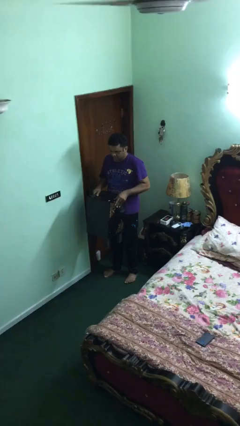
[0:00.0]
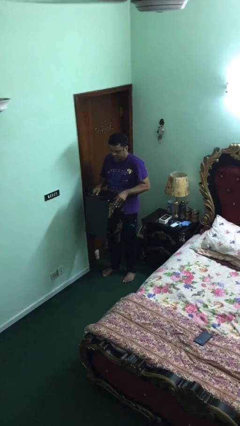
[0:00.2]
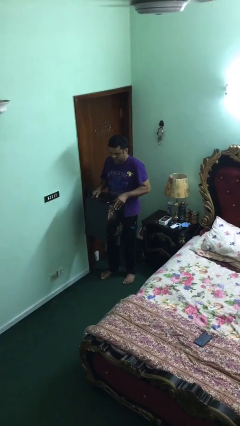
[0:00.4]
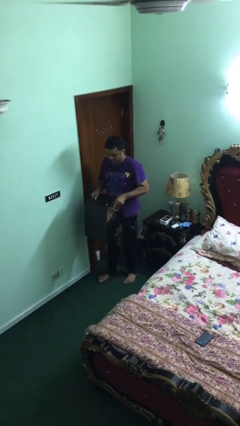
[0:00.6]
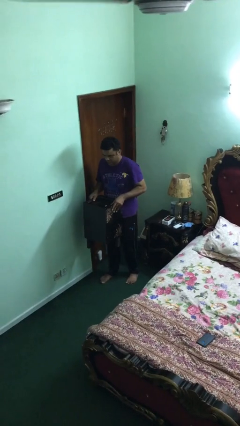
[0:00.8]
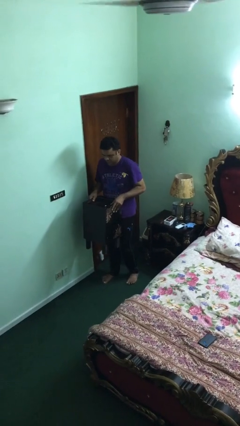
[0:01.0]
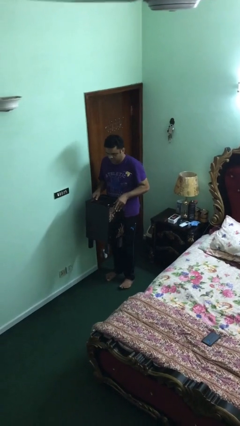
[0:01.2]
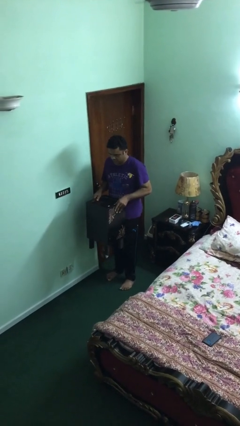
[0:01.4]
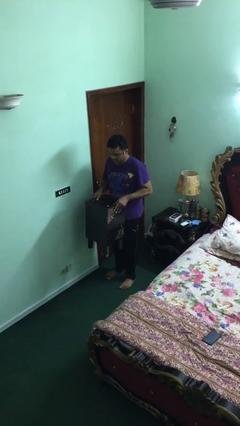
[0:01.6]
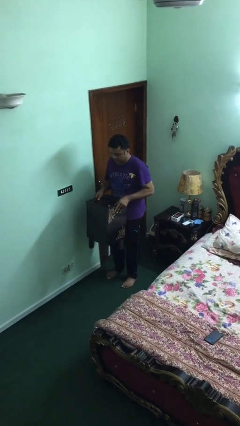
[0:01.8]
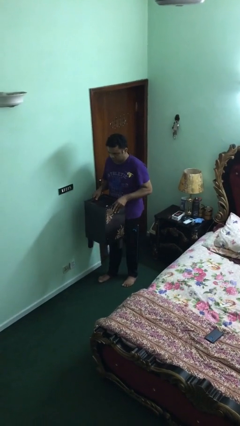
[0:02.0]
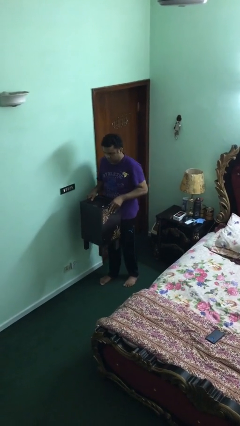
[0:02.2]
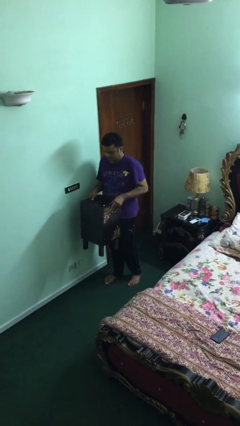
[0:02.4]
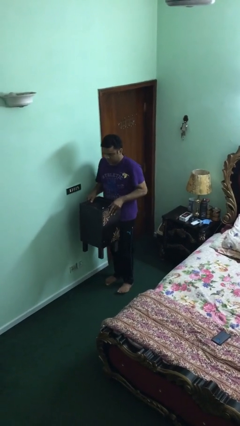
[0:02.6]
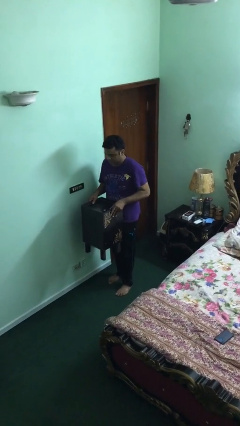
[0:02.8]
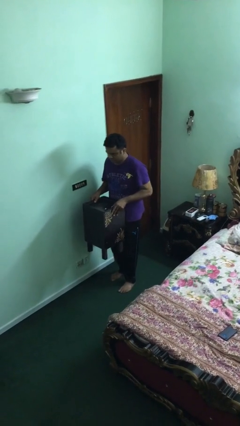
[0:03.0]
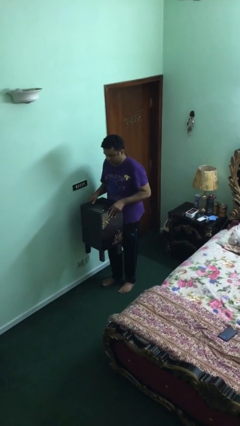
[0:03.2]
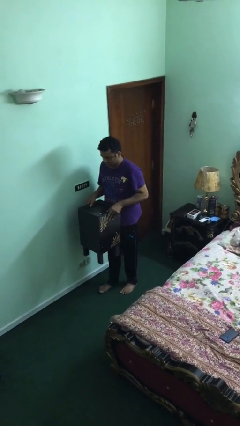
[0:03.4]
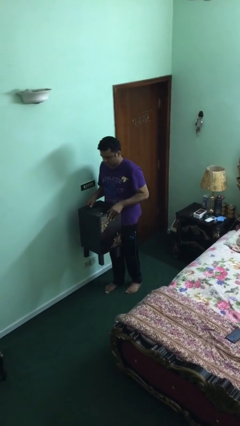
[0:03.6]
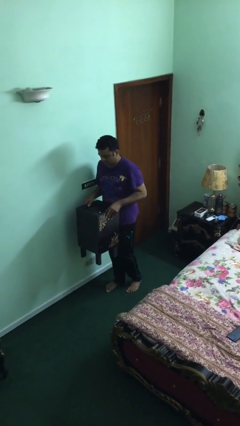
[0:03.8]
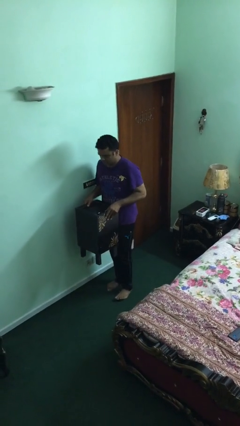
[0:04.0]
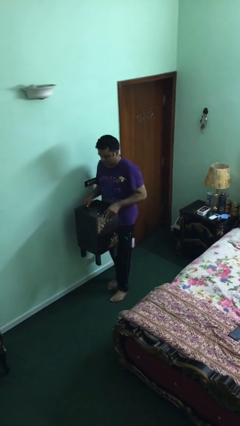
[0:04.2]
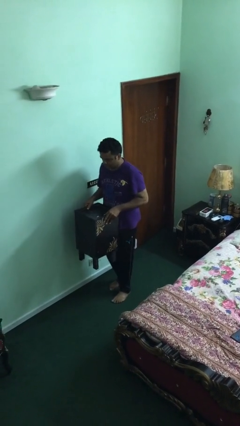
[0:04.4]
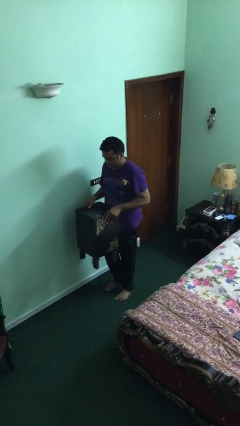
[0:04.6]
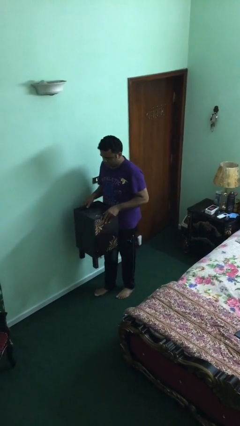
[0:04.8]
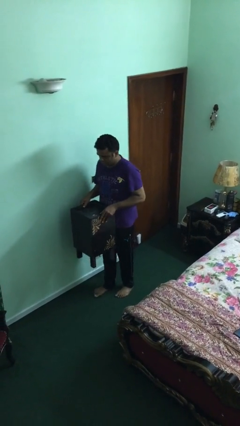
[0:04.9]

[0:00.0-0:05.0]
person carries heavy object

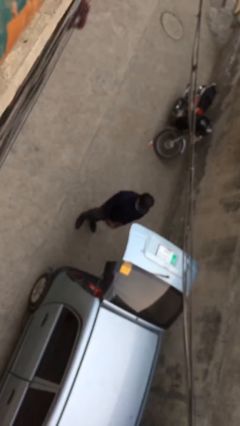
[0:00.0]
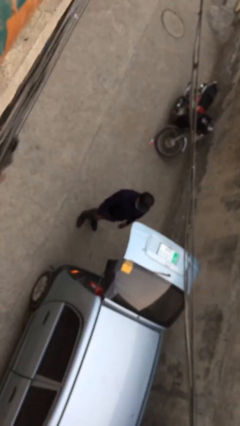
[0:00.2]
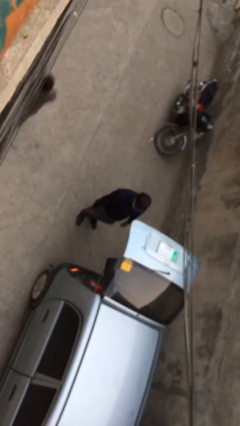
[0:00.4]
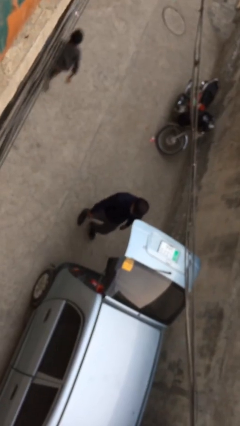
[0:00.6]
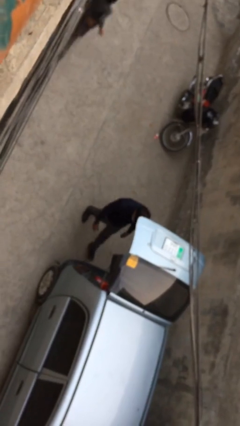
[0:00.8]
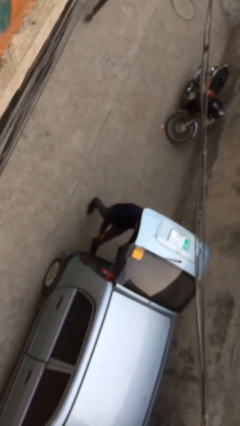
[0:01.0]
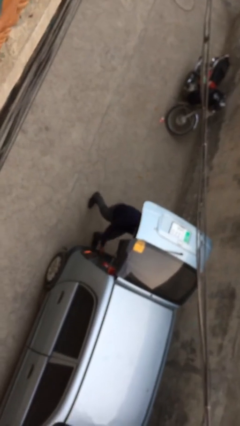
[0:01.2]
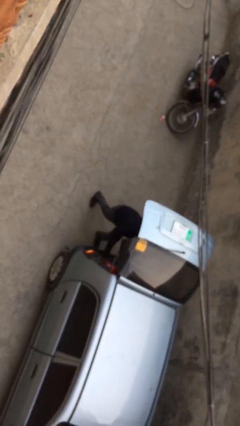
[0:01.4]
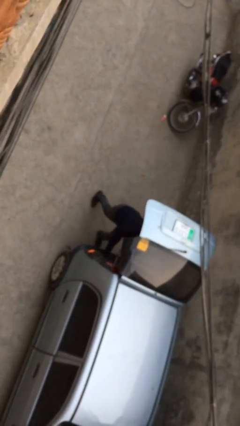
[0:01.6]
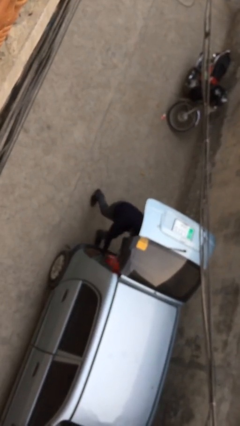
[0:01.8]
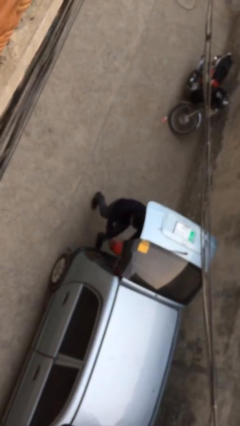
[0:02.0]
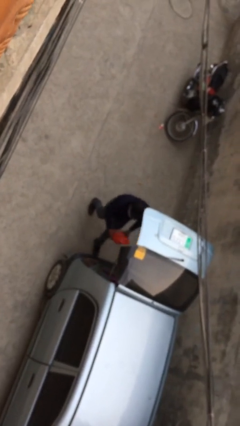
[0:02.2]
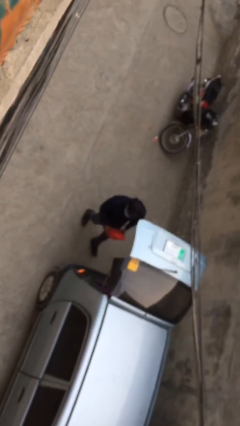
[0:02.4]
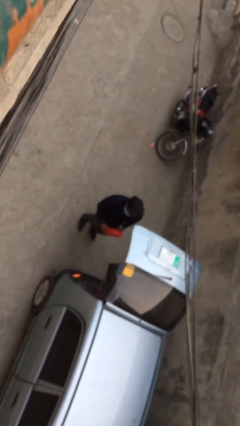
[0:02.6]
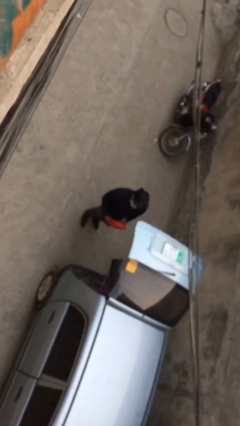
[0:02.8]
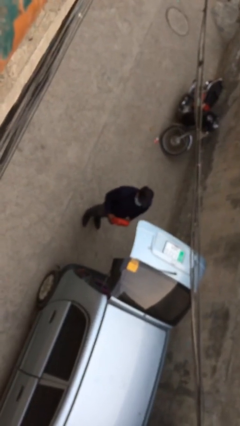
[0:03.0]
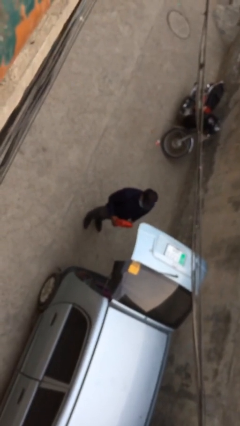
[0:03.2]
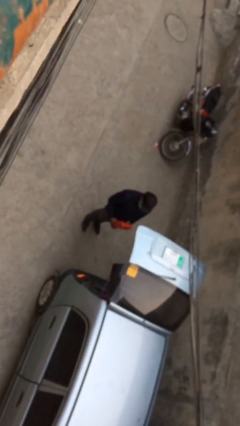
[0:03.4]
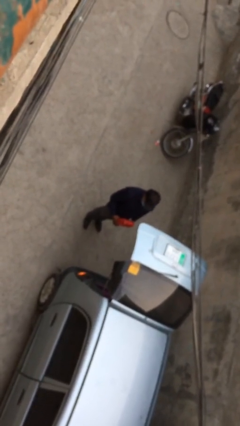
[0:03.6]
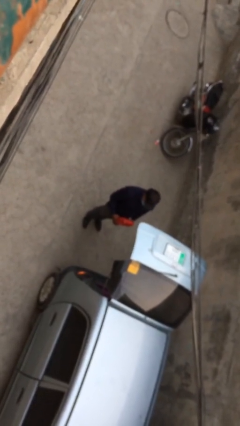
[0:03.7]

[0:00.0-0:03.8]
person unloads car

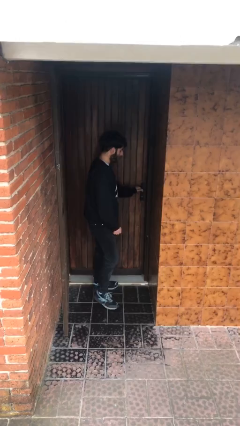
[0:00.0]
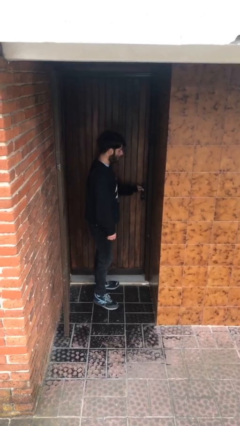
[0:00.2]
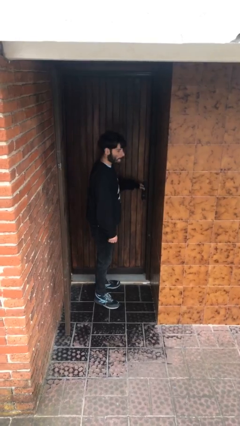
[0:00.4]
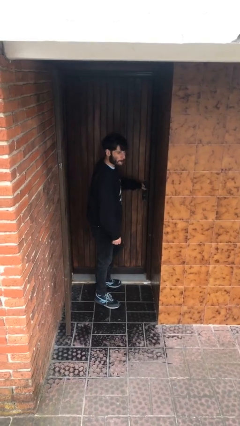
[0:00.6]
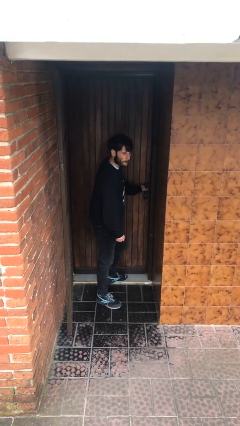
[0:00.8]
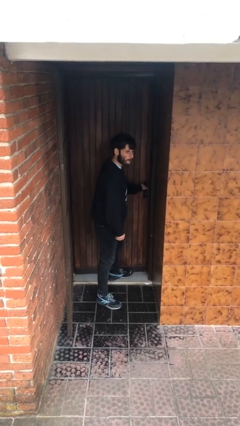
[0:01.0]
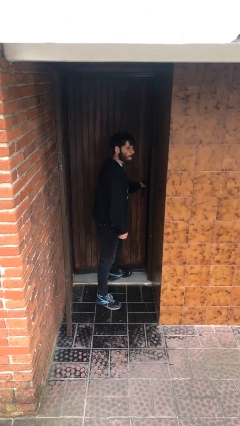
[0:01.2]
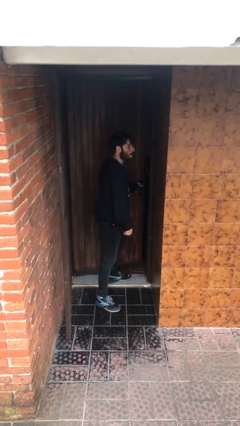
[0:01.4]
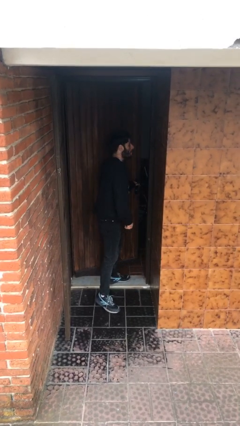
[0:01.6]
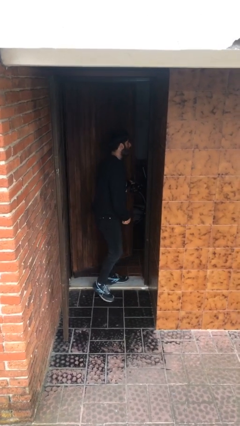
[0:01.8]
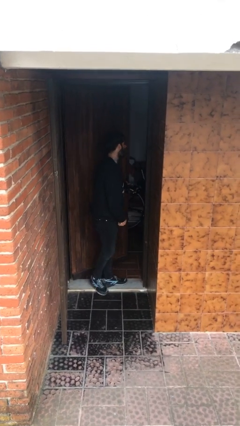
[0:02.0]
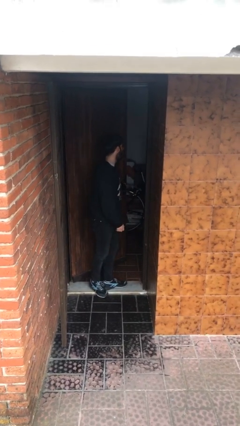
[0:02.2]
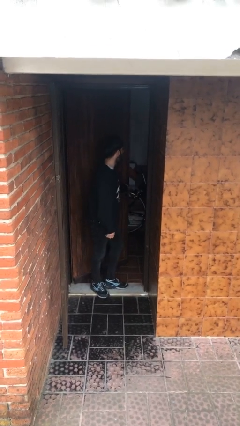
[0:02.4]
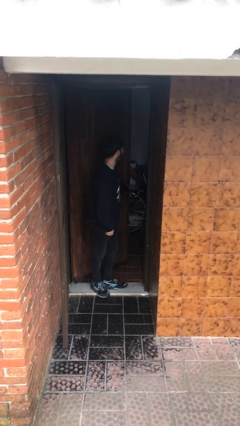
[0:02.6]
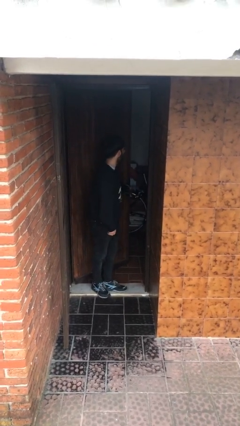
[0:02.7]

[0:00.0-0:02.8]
person opens facility door

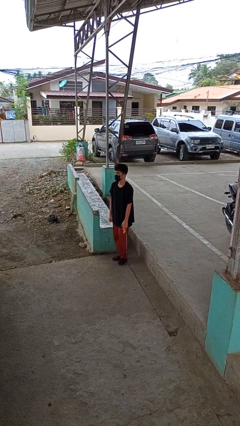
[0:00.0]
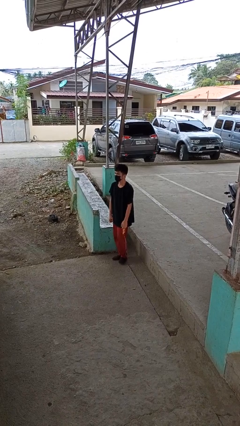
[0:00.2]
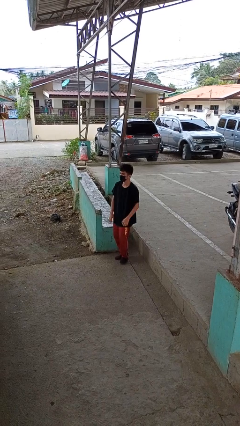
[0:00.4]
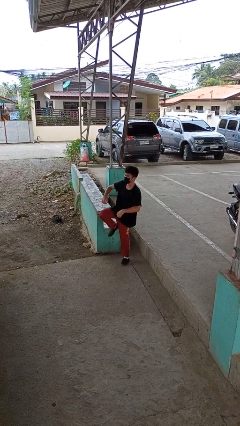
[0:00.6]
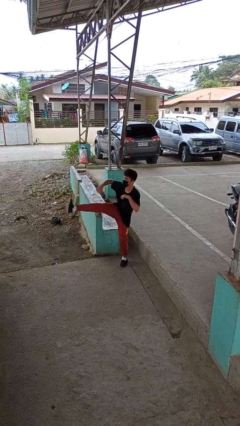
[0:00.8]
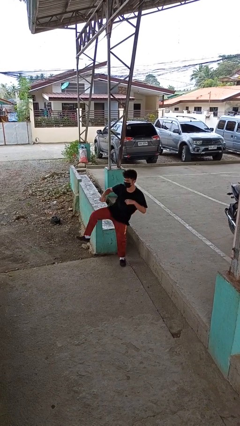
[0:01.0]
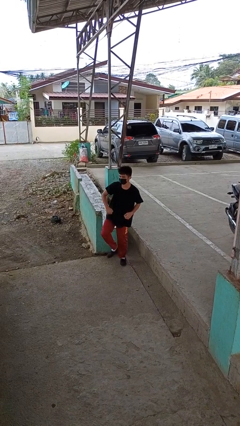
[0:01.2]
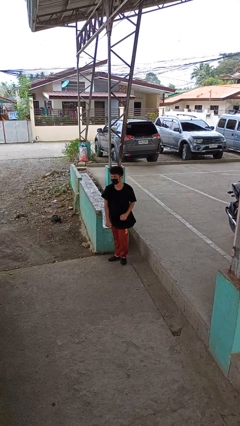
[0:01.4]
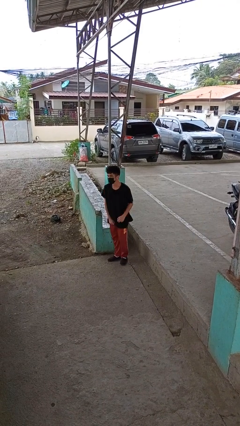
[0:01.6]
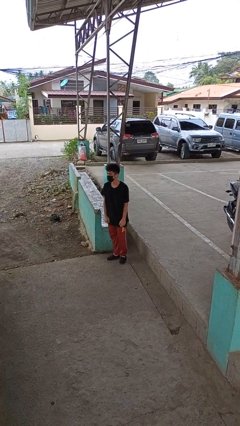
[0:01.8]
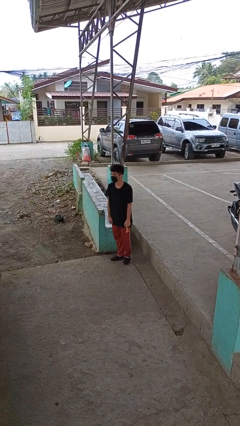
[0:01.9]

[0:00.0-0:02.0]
person karate kicks

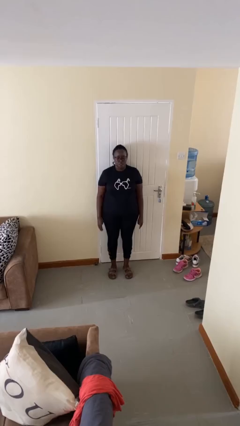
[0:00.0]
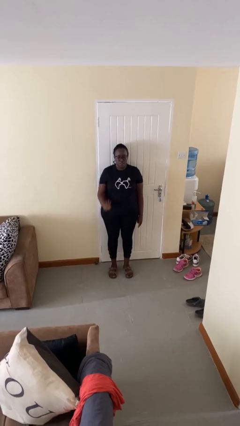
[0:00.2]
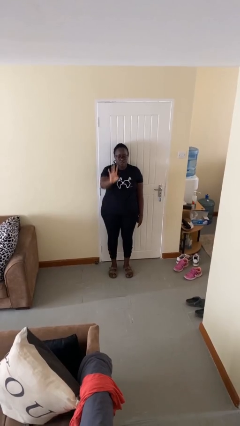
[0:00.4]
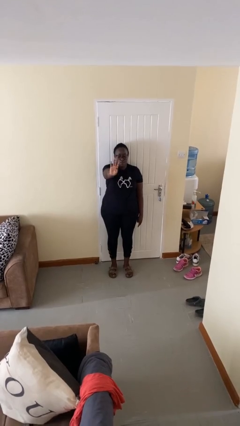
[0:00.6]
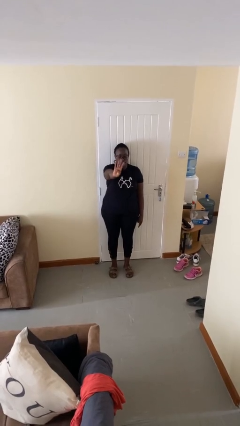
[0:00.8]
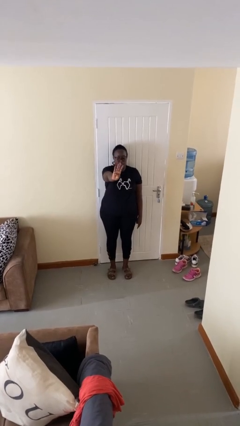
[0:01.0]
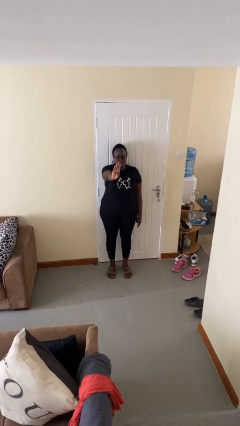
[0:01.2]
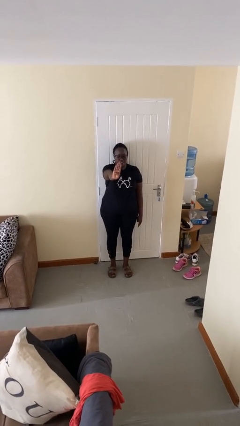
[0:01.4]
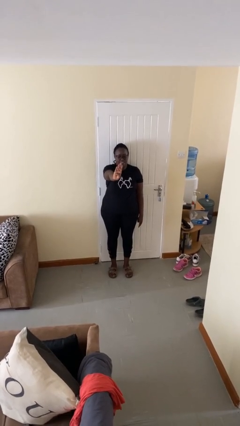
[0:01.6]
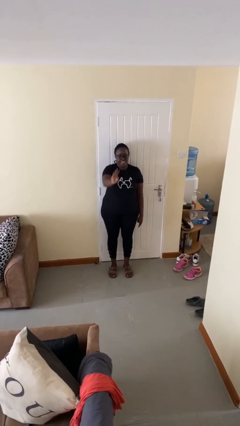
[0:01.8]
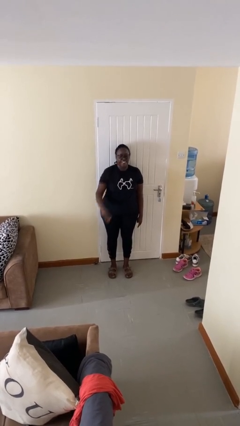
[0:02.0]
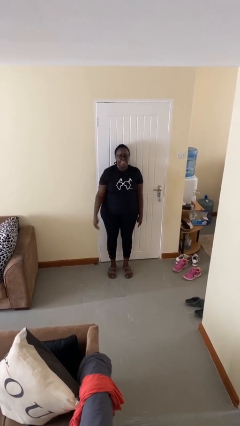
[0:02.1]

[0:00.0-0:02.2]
person gestures number four

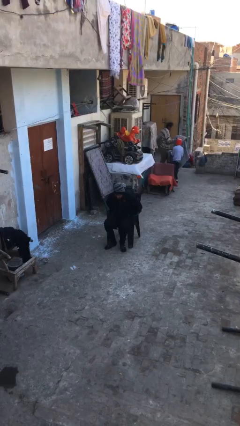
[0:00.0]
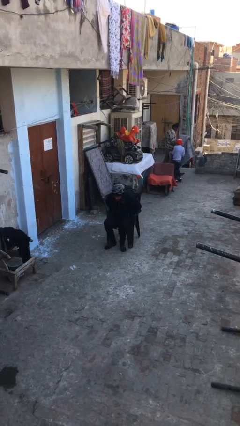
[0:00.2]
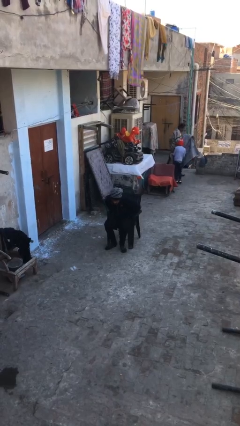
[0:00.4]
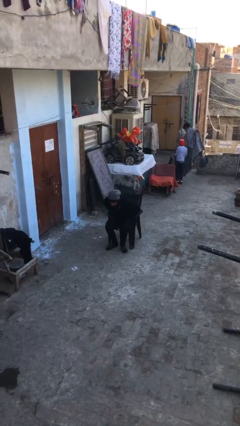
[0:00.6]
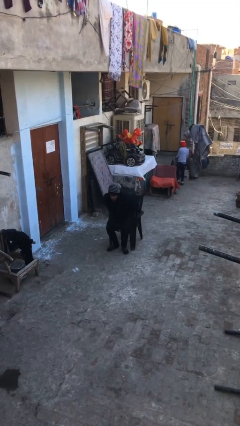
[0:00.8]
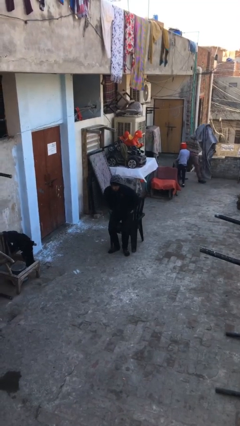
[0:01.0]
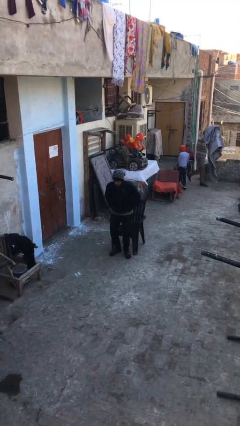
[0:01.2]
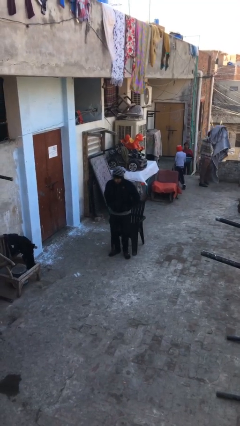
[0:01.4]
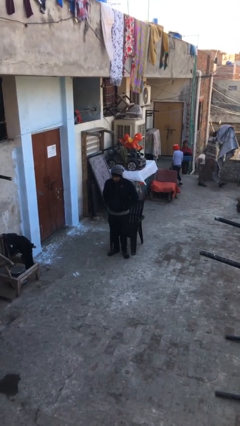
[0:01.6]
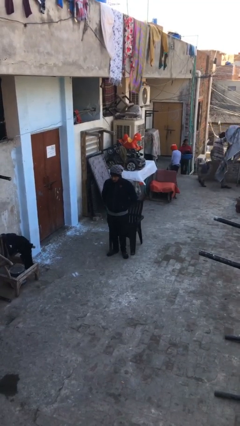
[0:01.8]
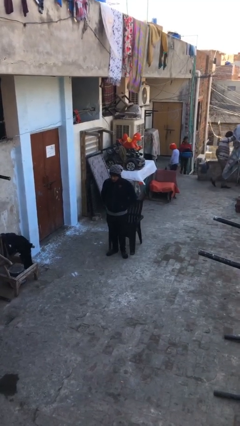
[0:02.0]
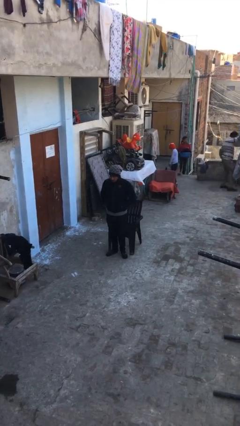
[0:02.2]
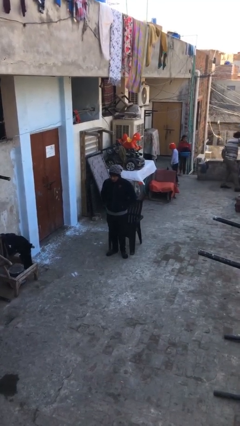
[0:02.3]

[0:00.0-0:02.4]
person stands up
